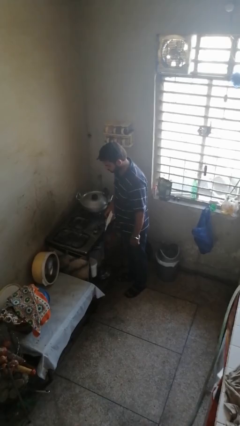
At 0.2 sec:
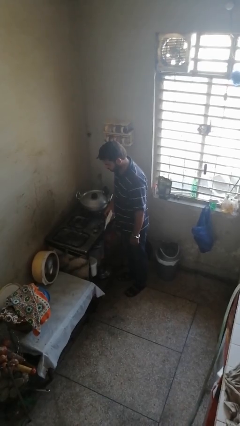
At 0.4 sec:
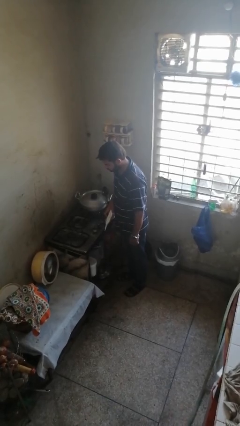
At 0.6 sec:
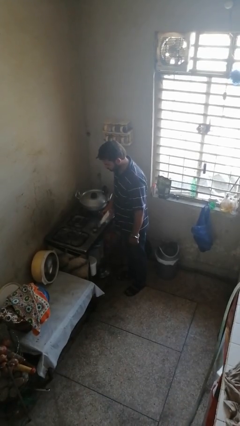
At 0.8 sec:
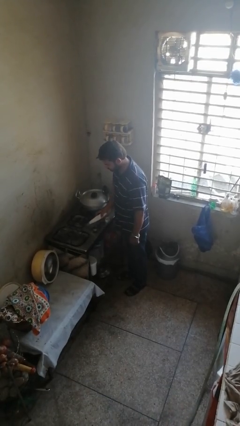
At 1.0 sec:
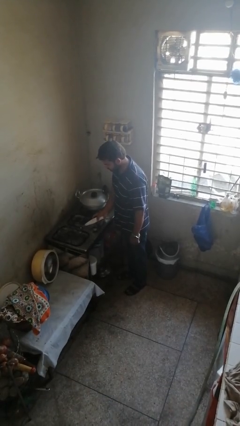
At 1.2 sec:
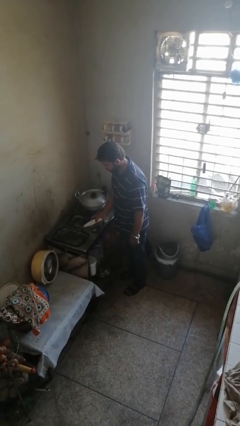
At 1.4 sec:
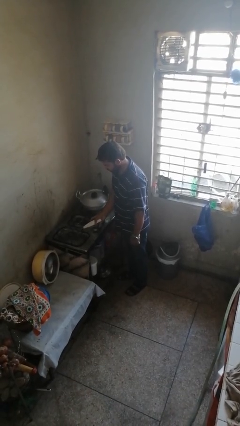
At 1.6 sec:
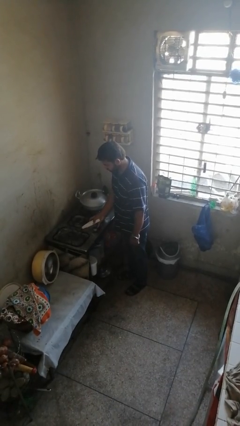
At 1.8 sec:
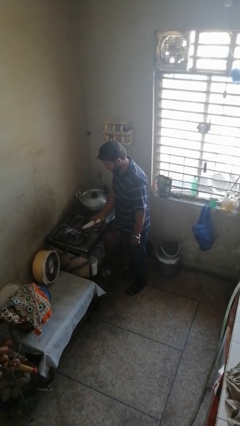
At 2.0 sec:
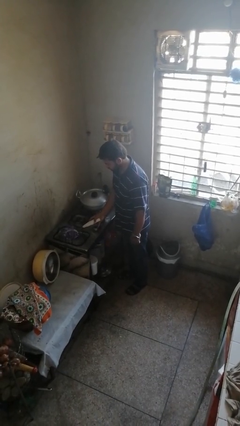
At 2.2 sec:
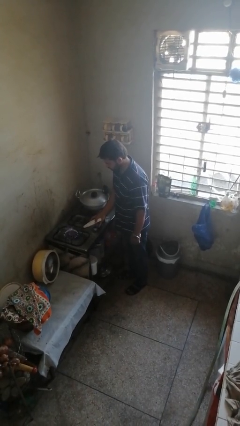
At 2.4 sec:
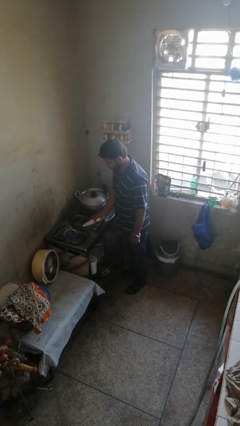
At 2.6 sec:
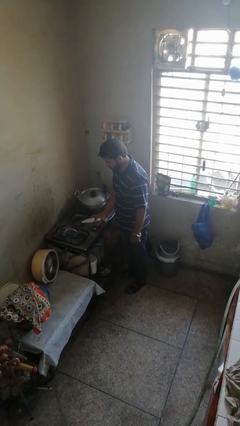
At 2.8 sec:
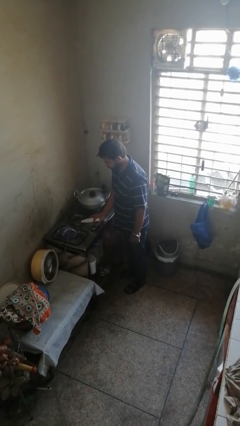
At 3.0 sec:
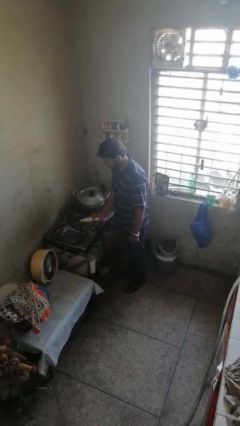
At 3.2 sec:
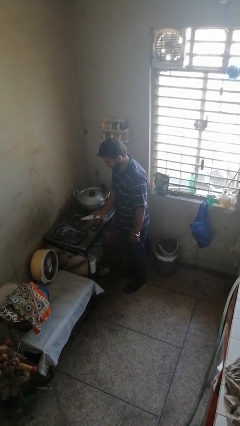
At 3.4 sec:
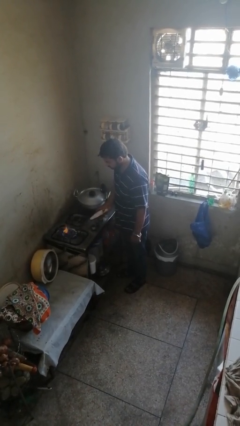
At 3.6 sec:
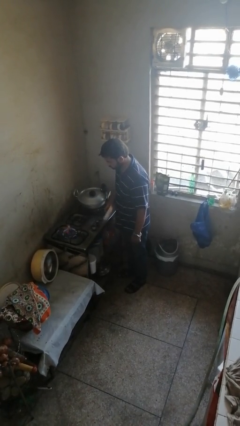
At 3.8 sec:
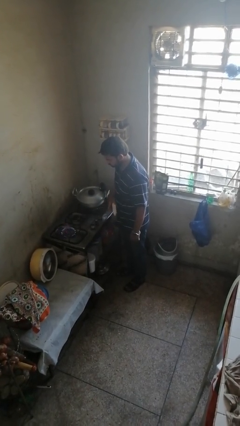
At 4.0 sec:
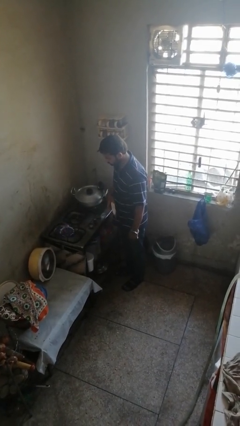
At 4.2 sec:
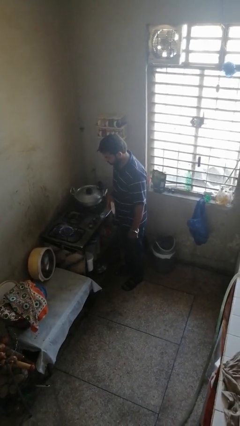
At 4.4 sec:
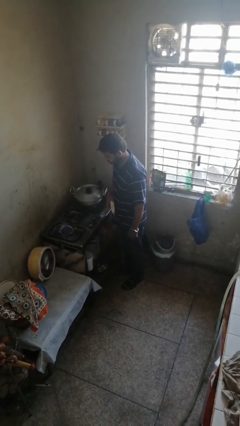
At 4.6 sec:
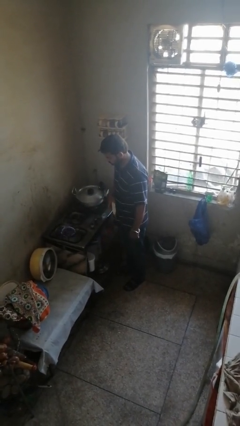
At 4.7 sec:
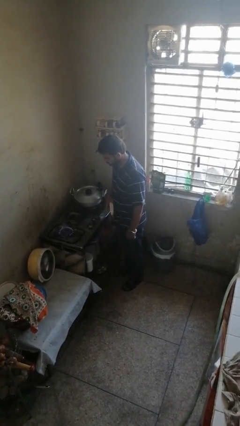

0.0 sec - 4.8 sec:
person turns on stovetop

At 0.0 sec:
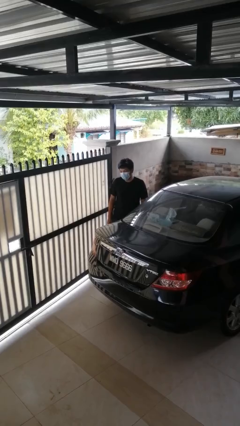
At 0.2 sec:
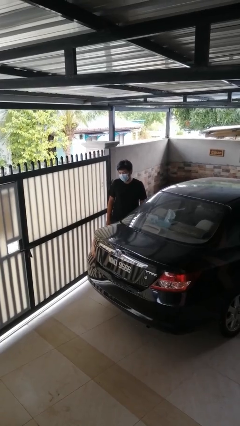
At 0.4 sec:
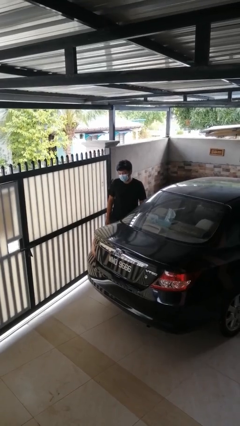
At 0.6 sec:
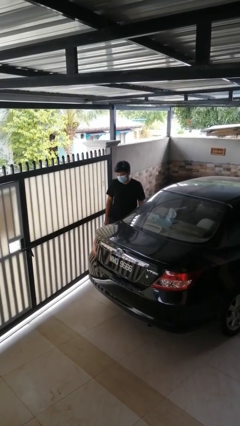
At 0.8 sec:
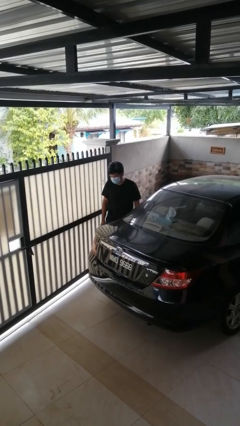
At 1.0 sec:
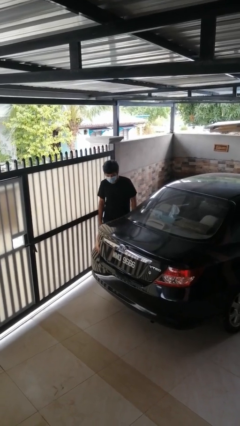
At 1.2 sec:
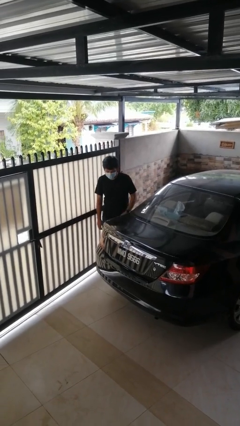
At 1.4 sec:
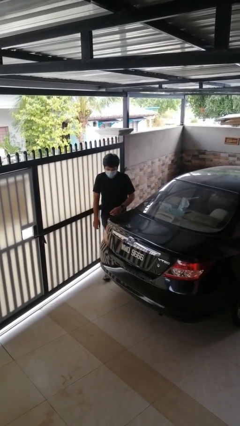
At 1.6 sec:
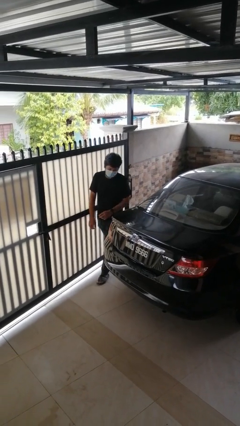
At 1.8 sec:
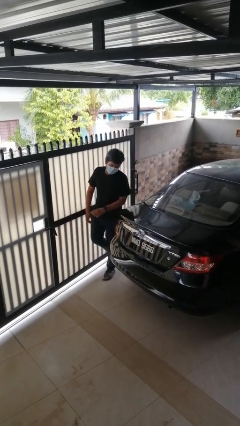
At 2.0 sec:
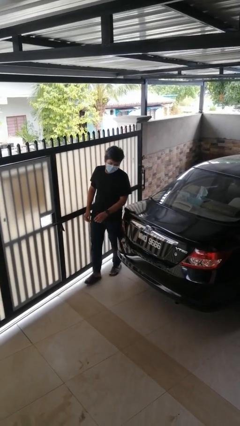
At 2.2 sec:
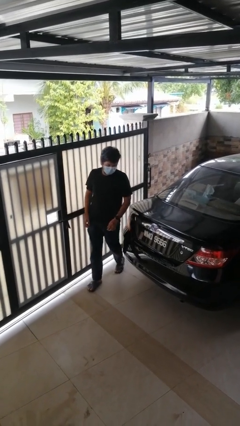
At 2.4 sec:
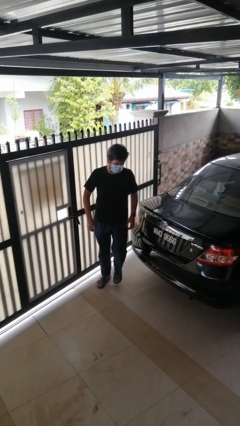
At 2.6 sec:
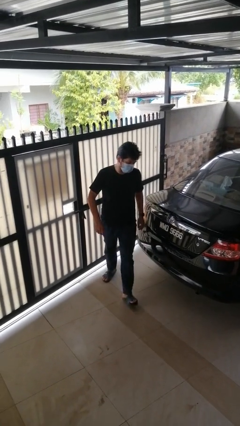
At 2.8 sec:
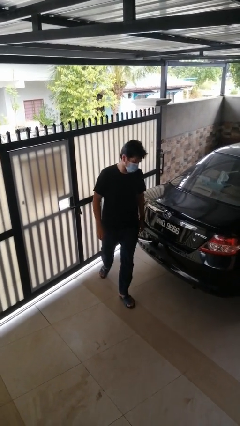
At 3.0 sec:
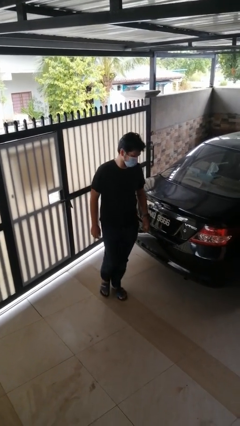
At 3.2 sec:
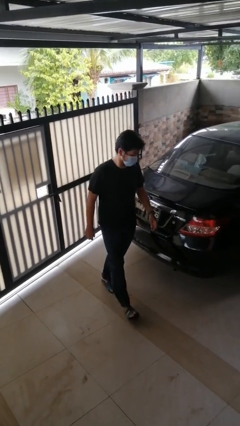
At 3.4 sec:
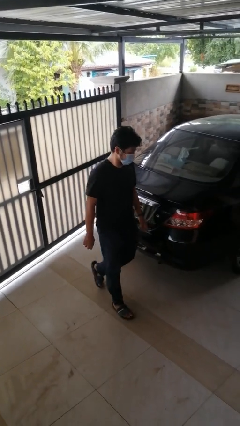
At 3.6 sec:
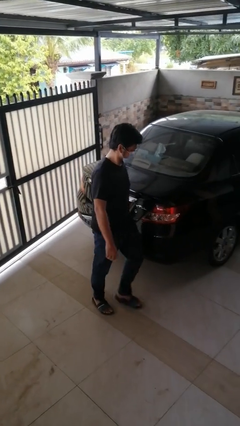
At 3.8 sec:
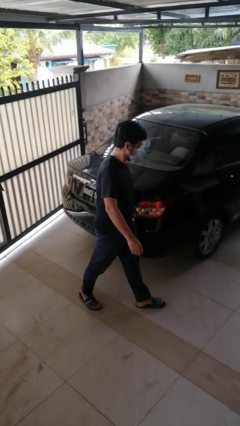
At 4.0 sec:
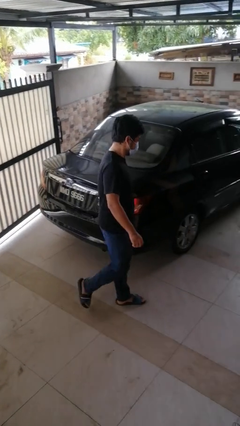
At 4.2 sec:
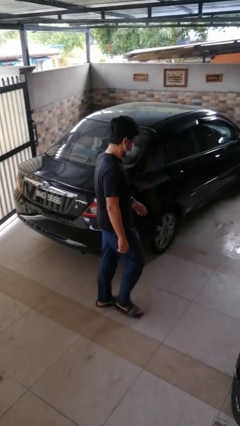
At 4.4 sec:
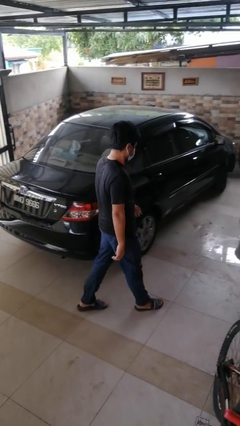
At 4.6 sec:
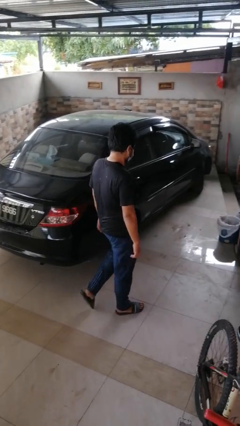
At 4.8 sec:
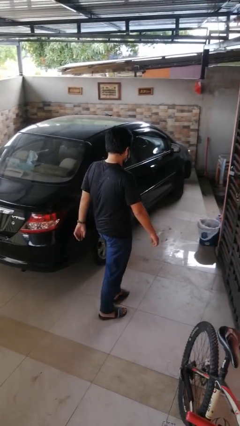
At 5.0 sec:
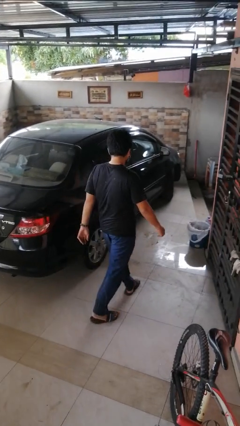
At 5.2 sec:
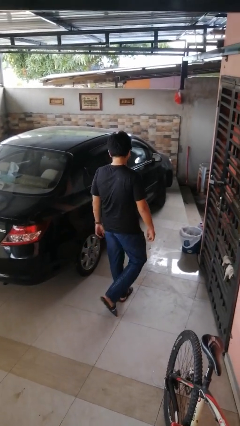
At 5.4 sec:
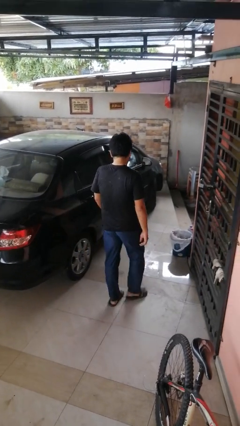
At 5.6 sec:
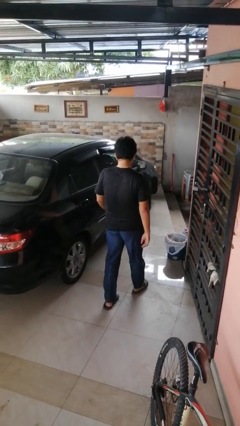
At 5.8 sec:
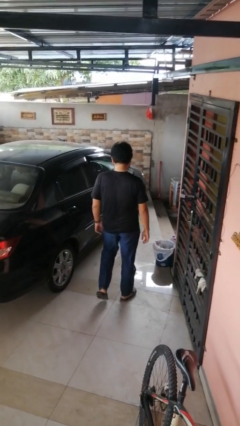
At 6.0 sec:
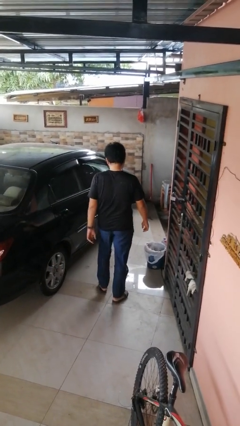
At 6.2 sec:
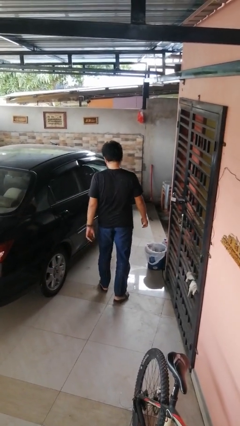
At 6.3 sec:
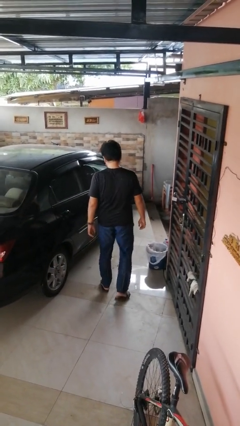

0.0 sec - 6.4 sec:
person walks around car

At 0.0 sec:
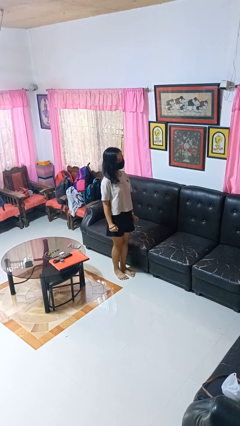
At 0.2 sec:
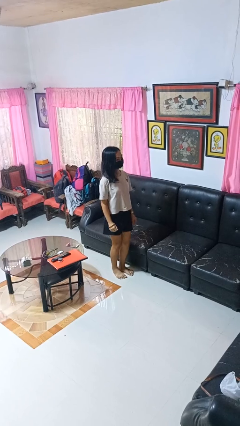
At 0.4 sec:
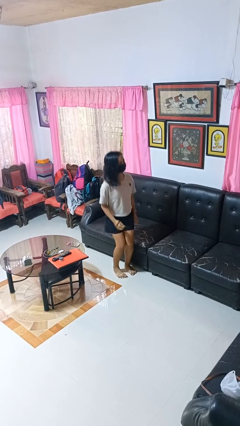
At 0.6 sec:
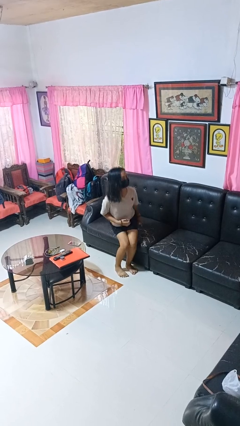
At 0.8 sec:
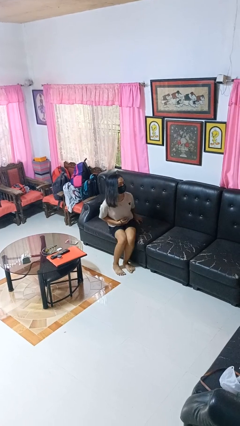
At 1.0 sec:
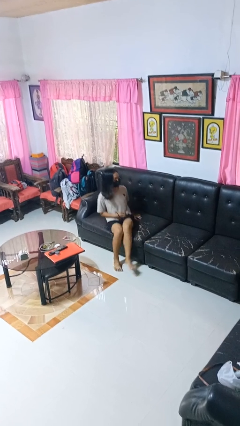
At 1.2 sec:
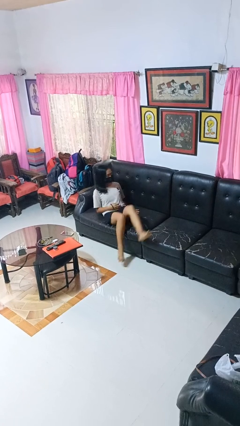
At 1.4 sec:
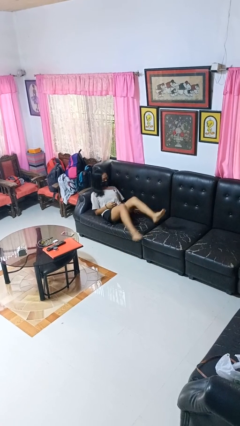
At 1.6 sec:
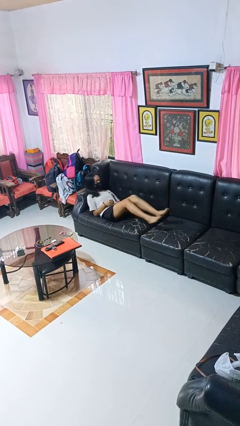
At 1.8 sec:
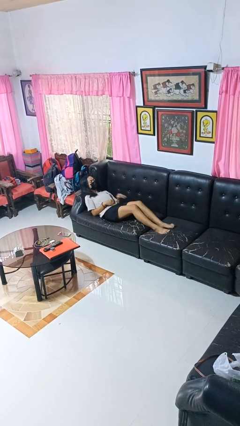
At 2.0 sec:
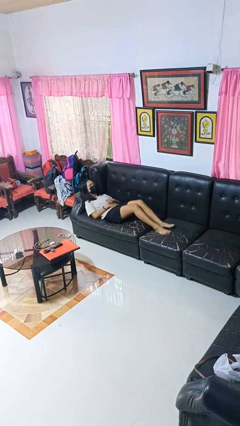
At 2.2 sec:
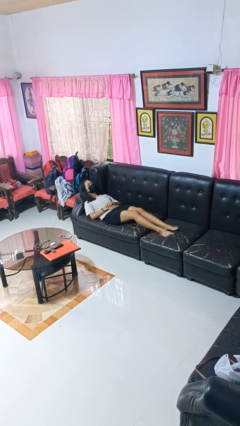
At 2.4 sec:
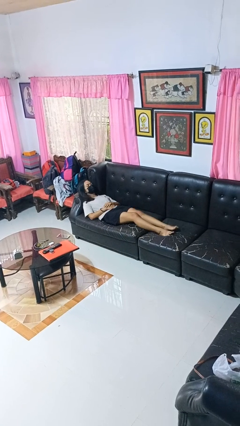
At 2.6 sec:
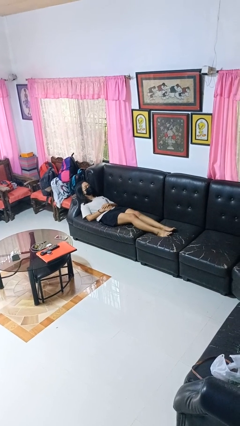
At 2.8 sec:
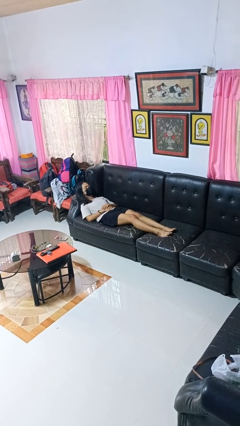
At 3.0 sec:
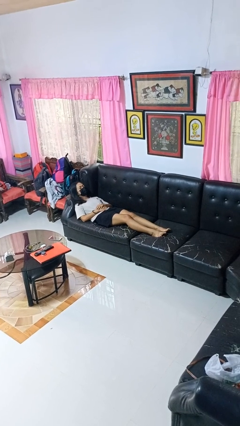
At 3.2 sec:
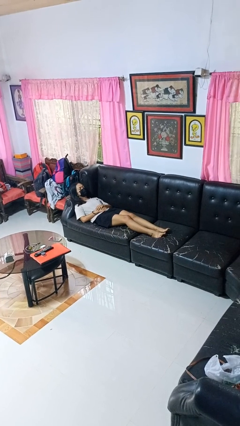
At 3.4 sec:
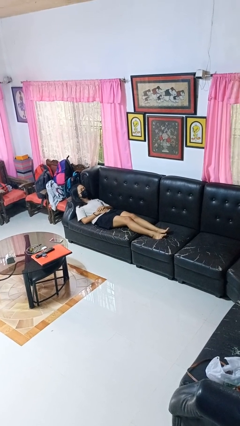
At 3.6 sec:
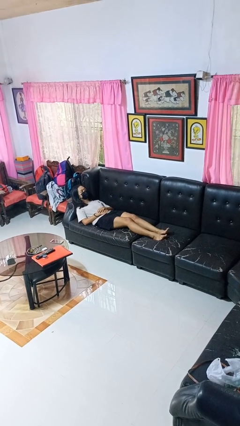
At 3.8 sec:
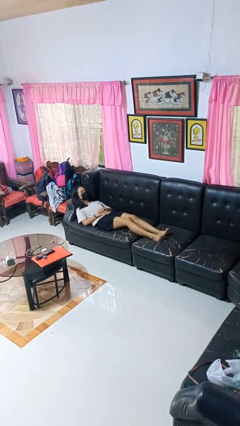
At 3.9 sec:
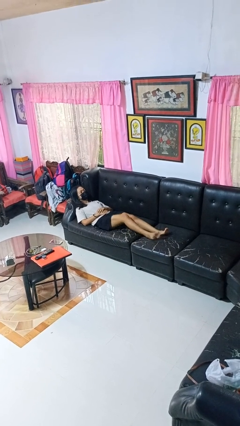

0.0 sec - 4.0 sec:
person lies down on couch

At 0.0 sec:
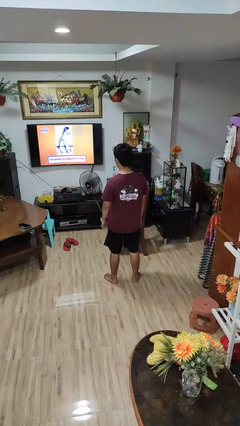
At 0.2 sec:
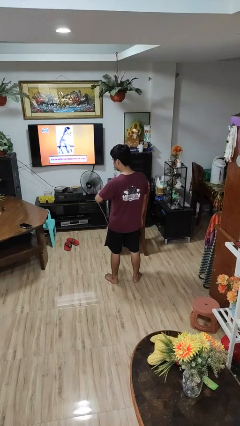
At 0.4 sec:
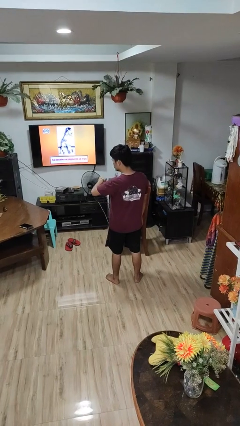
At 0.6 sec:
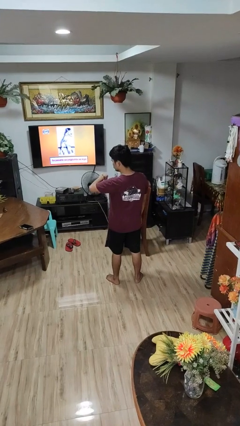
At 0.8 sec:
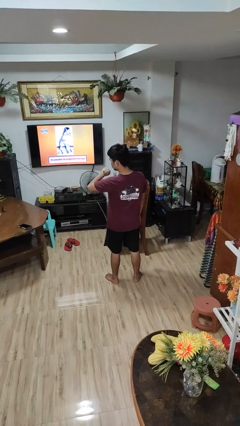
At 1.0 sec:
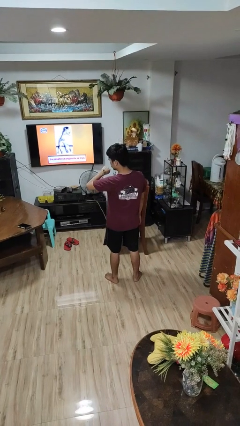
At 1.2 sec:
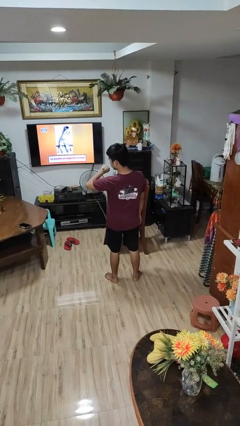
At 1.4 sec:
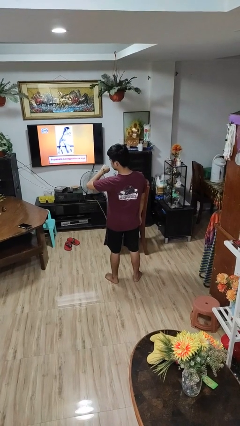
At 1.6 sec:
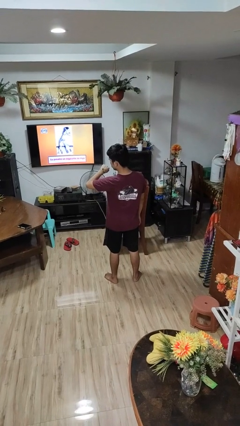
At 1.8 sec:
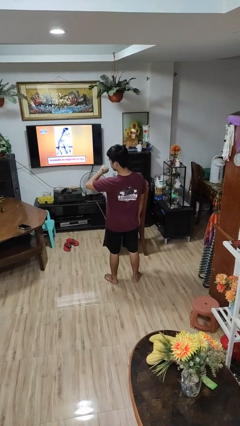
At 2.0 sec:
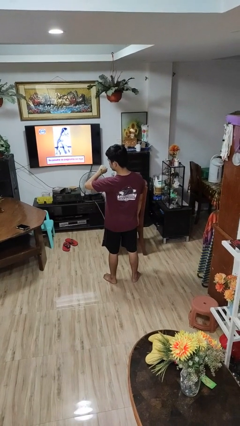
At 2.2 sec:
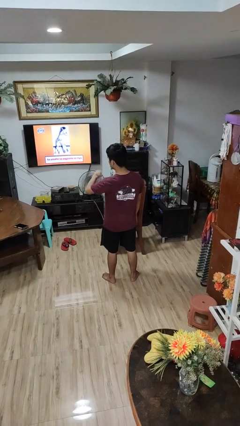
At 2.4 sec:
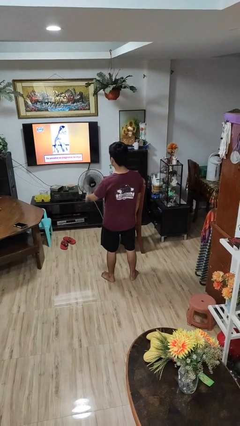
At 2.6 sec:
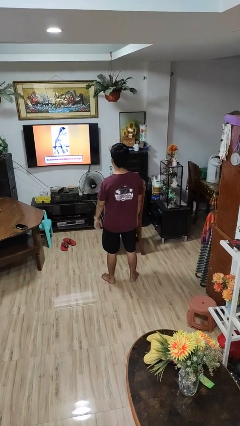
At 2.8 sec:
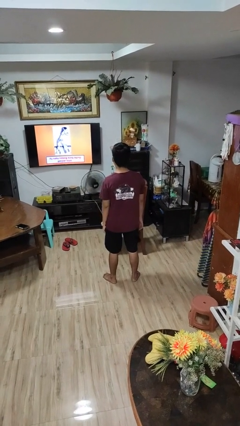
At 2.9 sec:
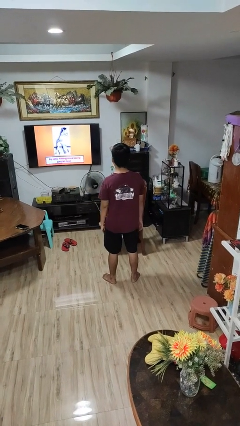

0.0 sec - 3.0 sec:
person looks at wristwatch
